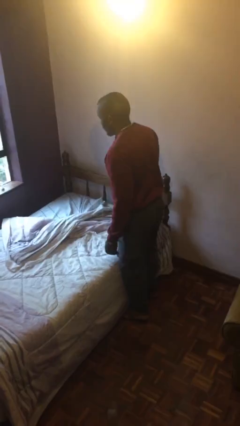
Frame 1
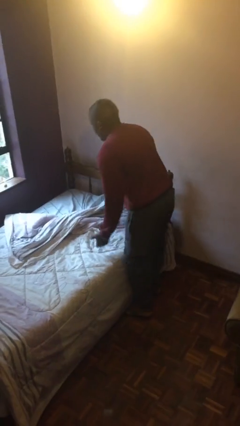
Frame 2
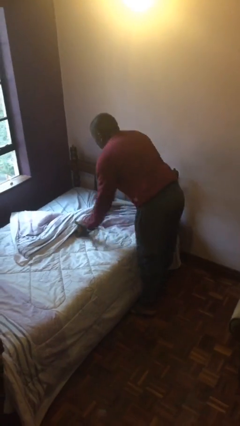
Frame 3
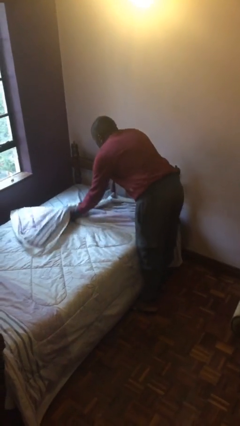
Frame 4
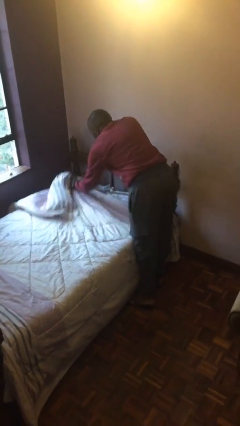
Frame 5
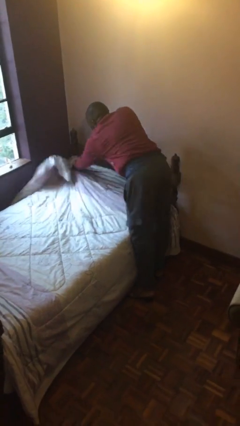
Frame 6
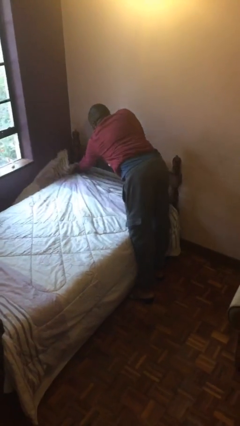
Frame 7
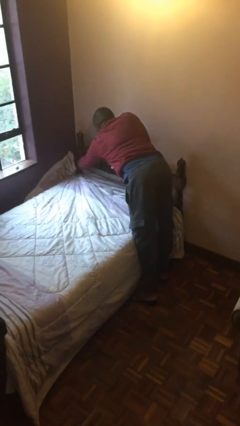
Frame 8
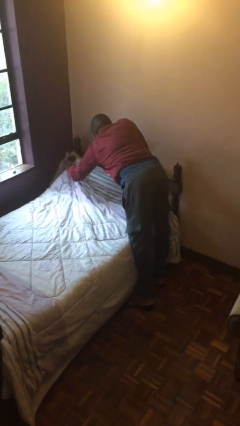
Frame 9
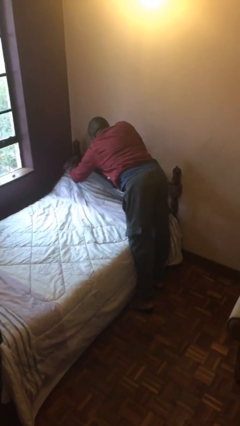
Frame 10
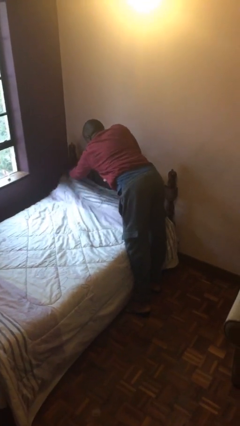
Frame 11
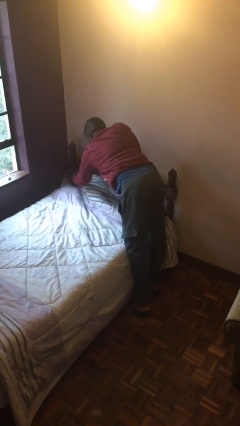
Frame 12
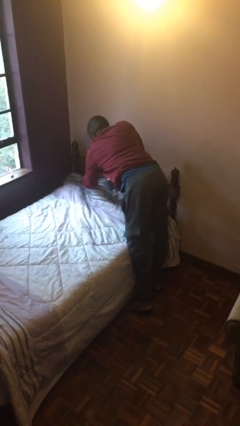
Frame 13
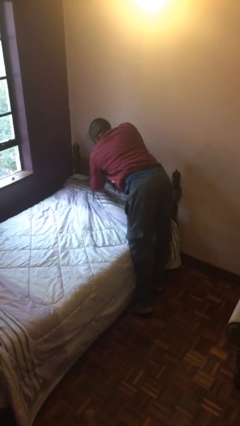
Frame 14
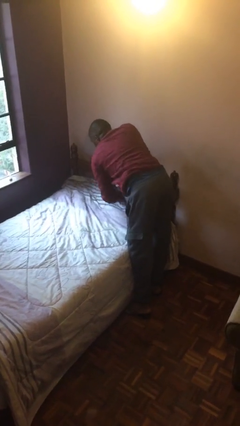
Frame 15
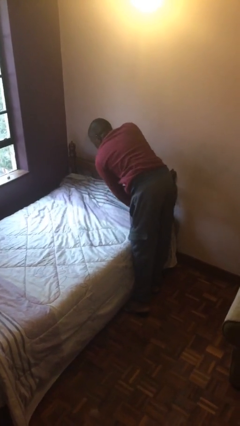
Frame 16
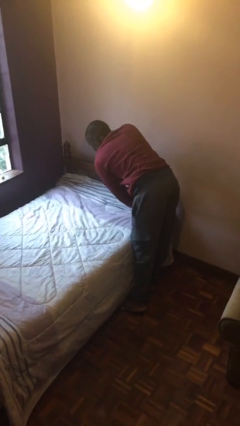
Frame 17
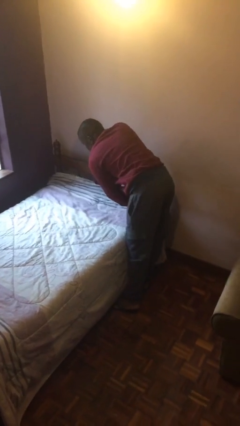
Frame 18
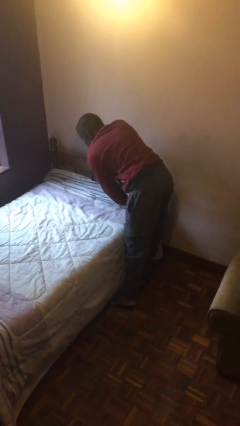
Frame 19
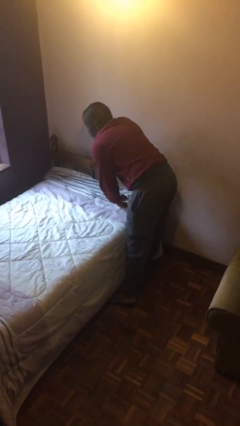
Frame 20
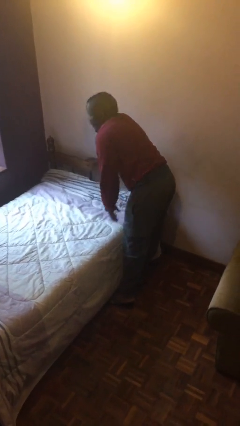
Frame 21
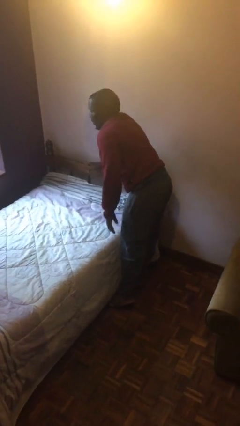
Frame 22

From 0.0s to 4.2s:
person makes bed

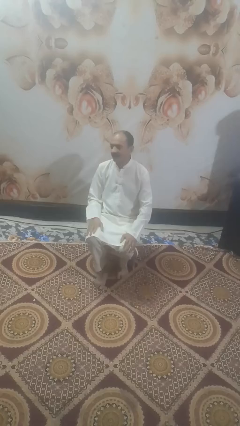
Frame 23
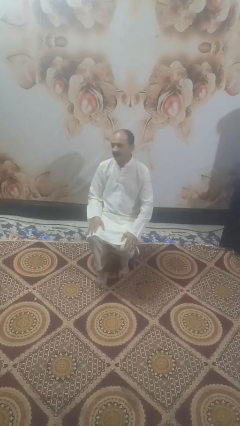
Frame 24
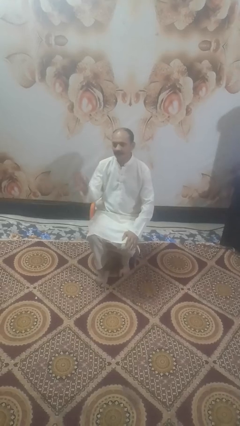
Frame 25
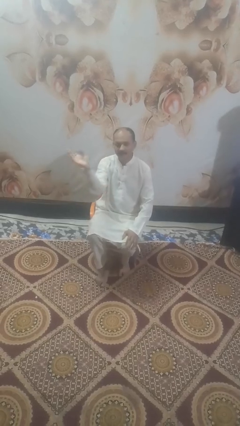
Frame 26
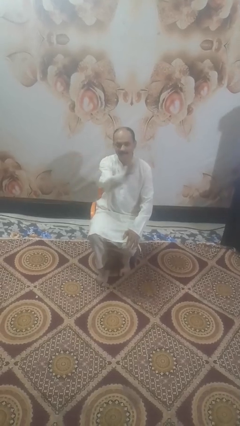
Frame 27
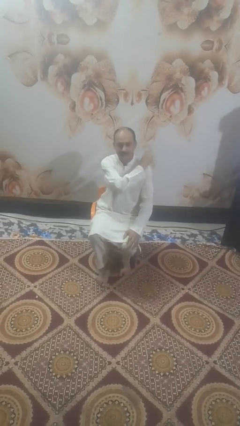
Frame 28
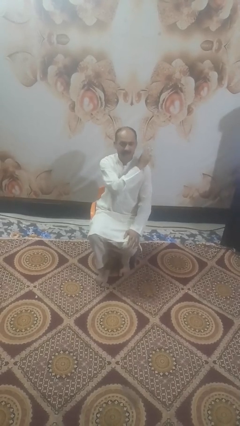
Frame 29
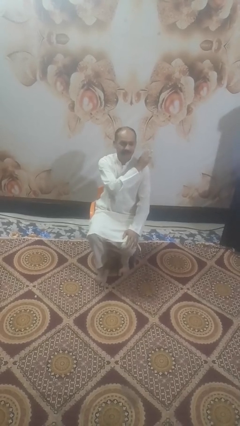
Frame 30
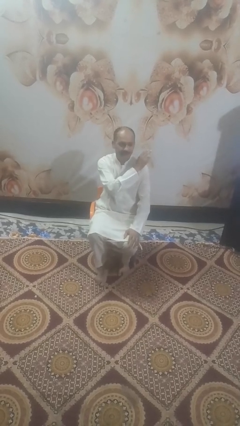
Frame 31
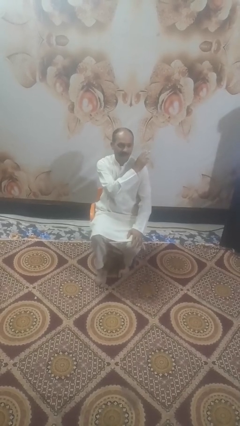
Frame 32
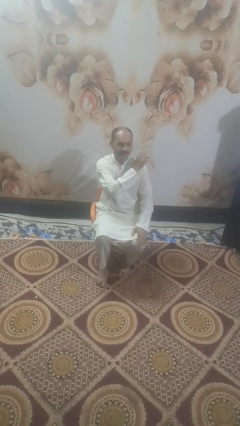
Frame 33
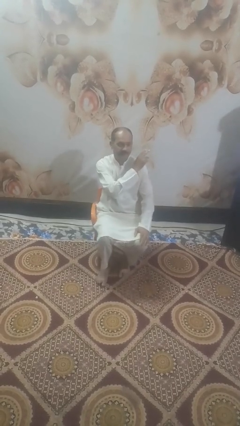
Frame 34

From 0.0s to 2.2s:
person gestures swipe left

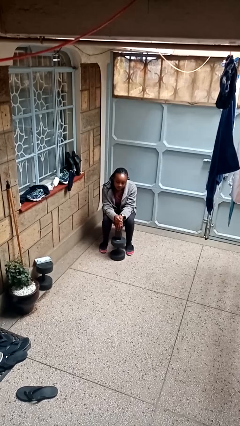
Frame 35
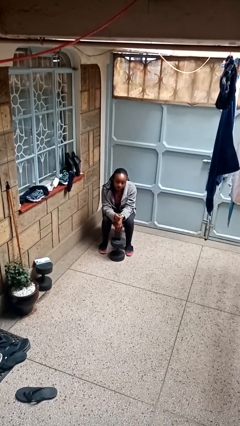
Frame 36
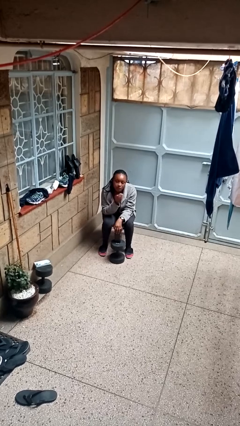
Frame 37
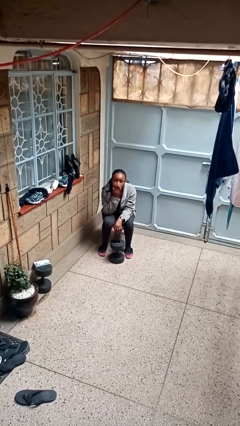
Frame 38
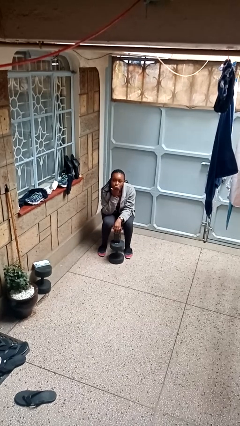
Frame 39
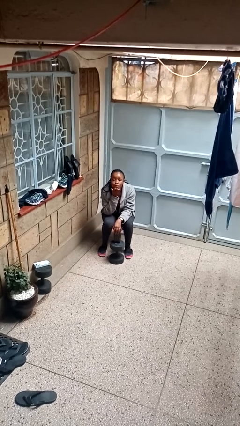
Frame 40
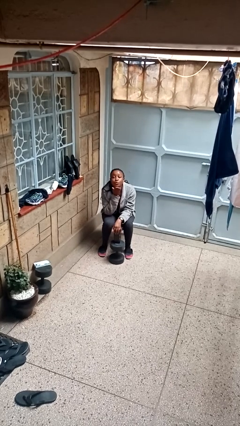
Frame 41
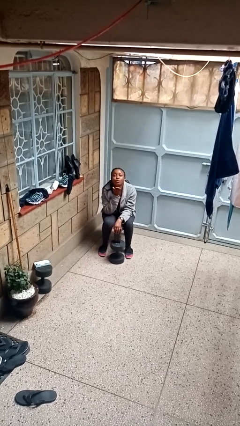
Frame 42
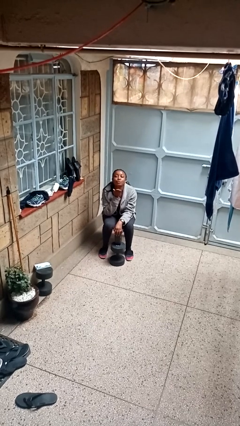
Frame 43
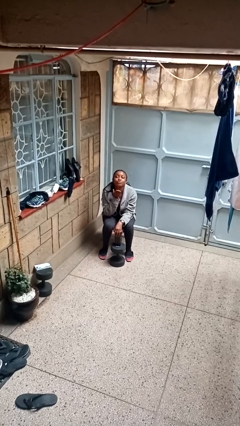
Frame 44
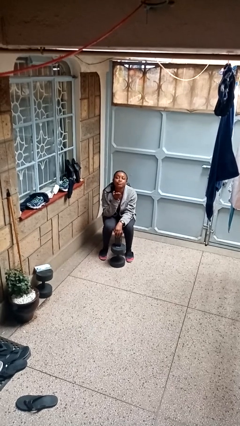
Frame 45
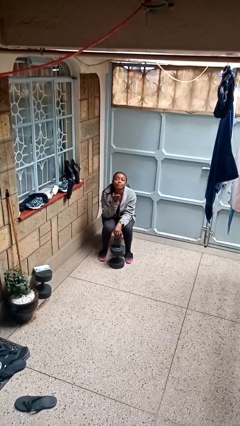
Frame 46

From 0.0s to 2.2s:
person gestures blow kiss

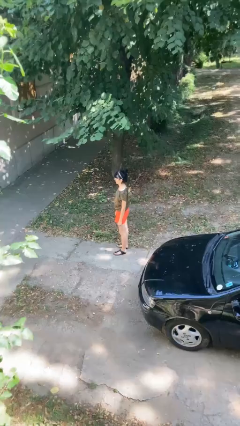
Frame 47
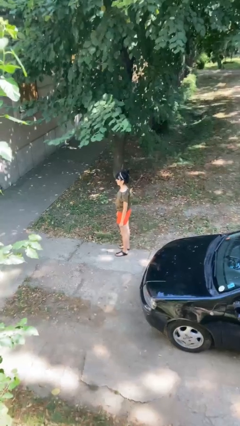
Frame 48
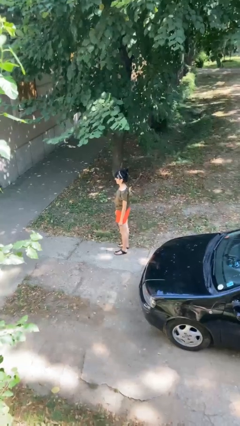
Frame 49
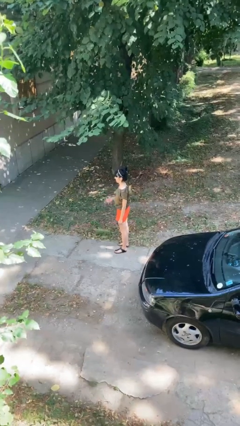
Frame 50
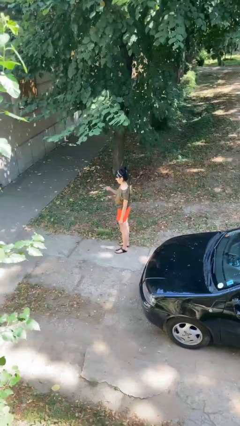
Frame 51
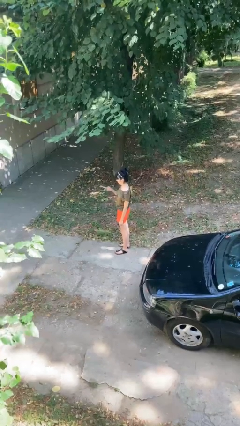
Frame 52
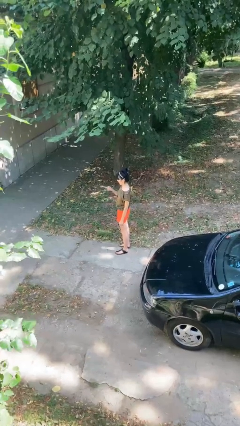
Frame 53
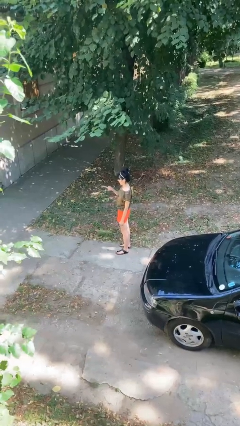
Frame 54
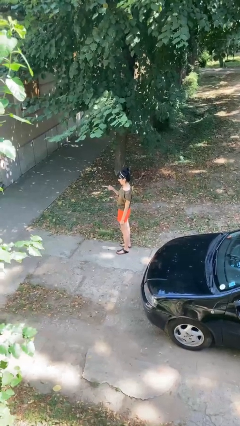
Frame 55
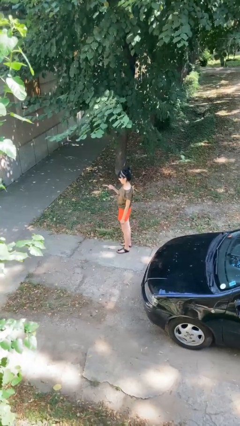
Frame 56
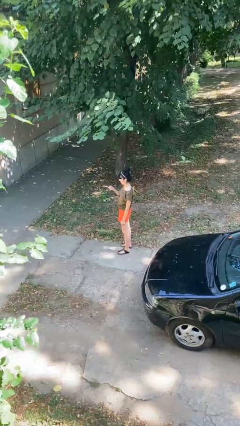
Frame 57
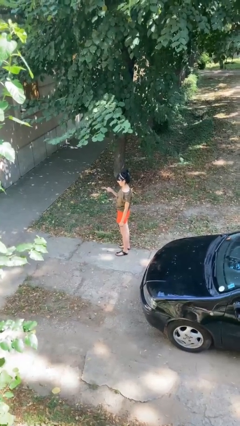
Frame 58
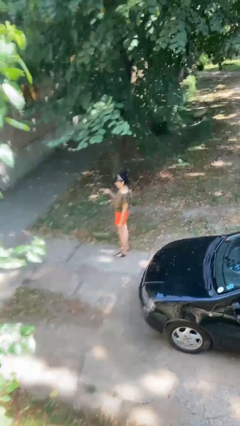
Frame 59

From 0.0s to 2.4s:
person points at person

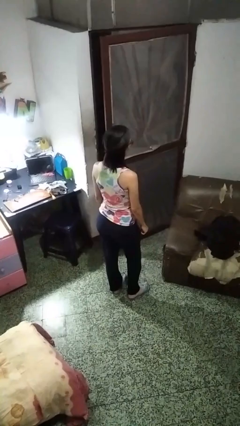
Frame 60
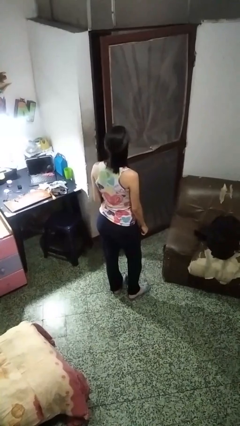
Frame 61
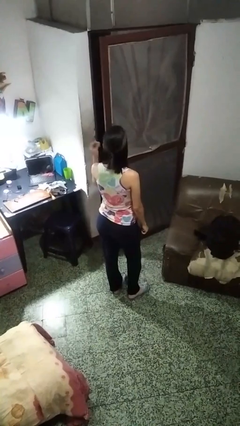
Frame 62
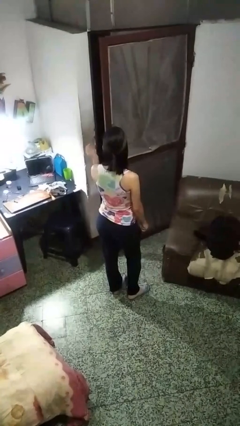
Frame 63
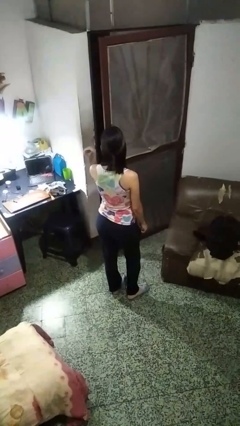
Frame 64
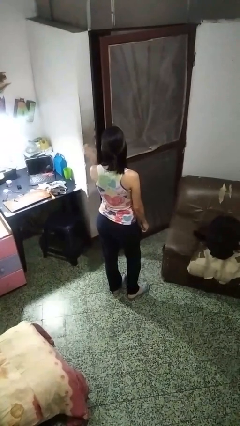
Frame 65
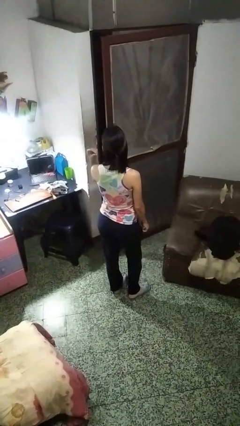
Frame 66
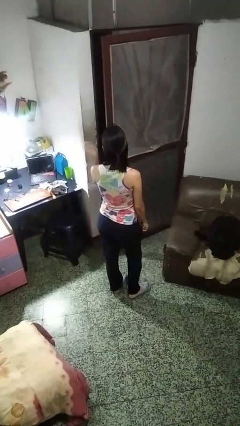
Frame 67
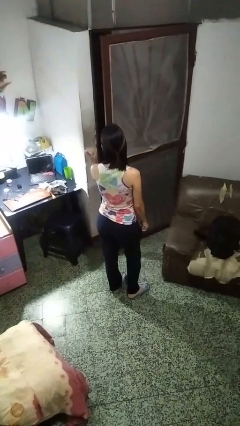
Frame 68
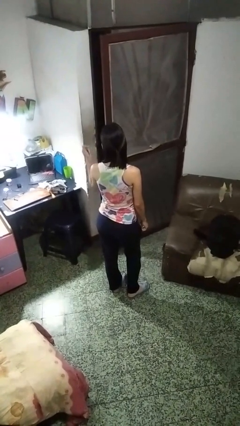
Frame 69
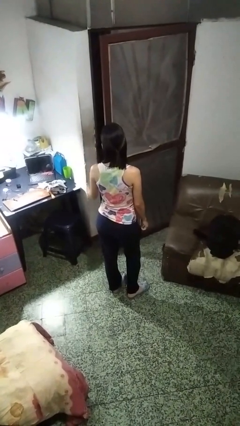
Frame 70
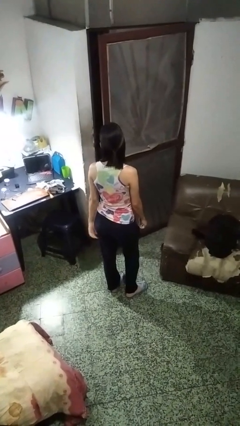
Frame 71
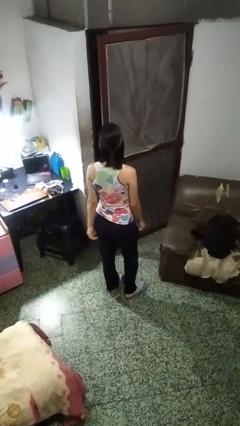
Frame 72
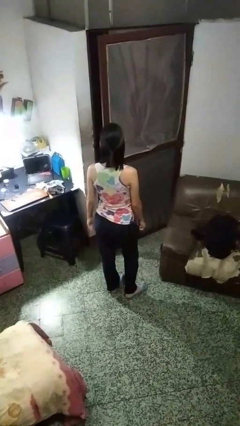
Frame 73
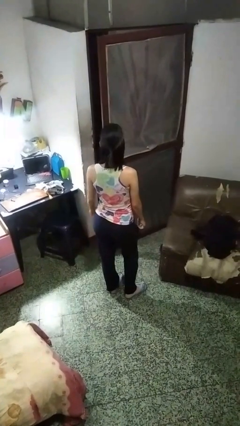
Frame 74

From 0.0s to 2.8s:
person snaps fingers

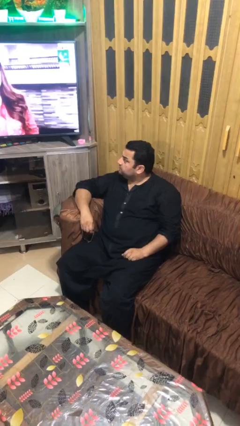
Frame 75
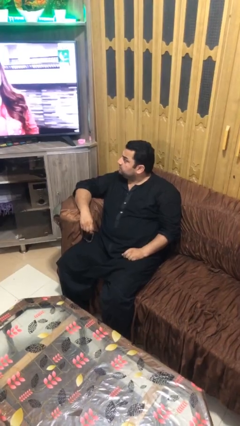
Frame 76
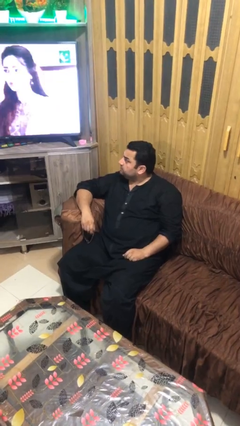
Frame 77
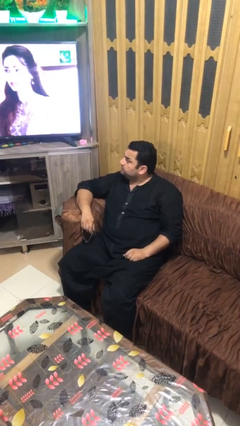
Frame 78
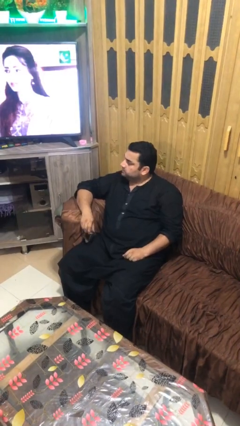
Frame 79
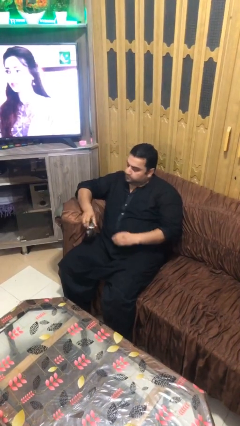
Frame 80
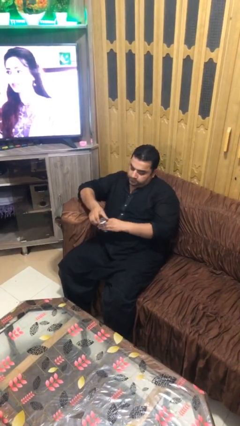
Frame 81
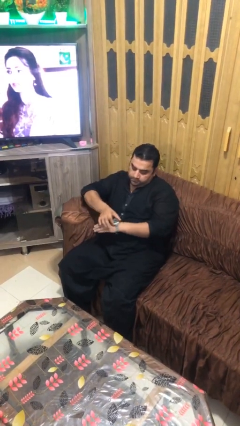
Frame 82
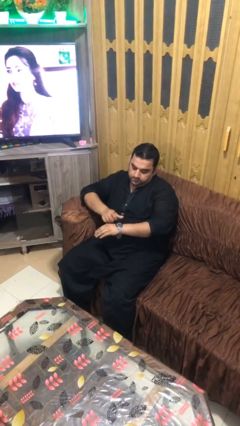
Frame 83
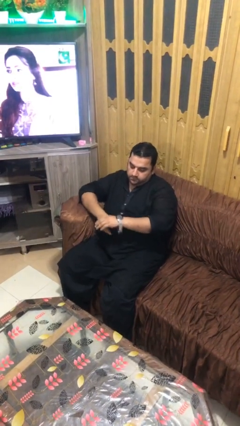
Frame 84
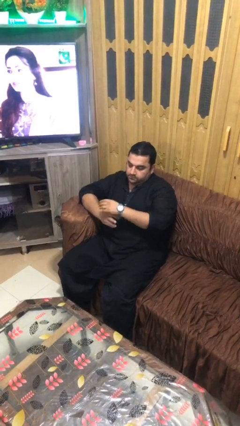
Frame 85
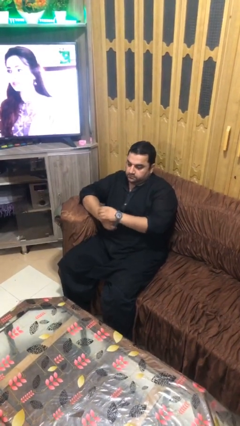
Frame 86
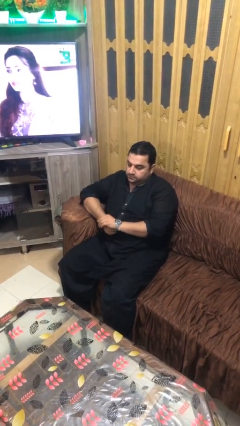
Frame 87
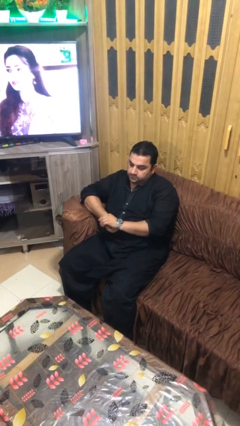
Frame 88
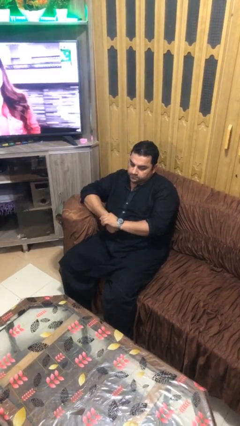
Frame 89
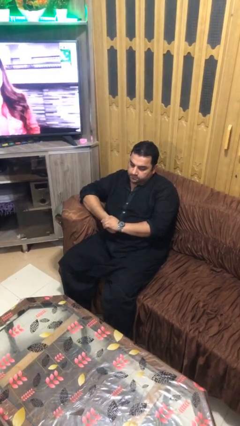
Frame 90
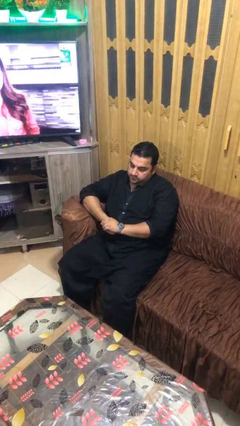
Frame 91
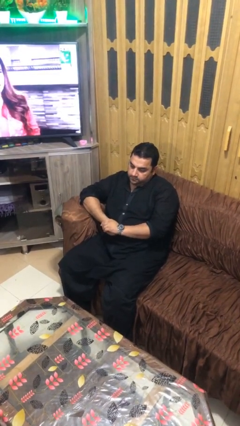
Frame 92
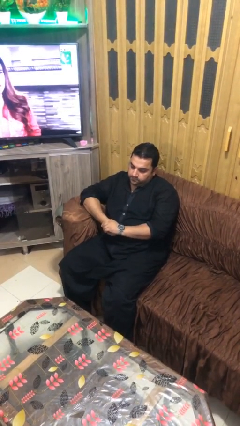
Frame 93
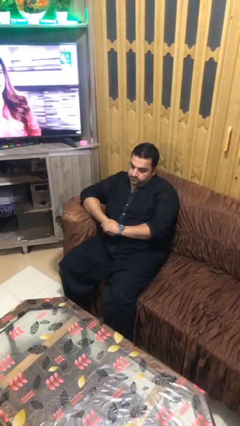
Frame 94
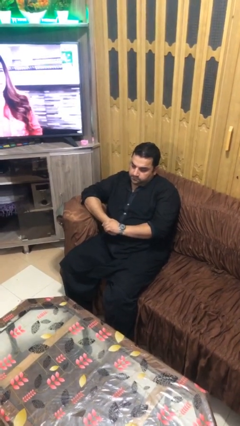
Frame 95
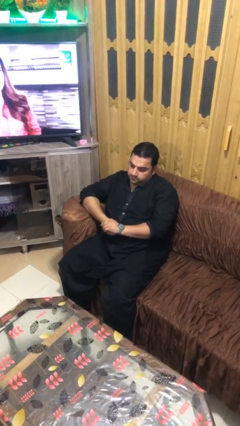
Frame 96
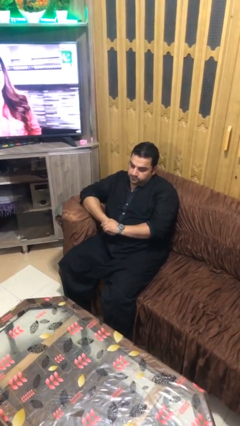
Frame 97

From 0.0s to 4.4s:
person puts on wristwatch
